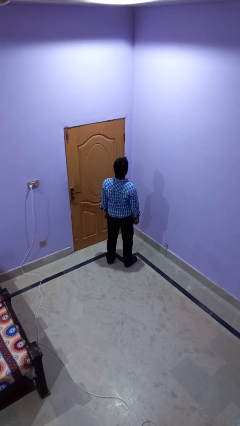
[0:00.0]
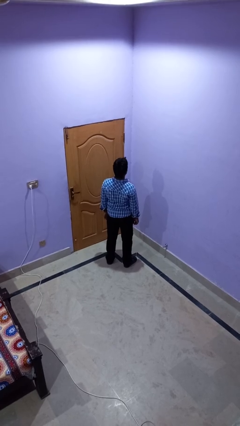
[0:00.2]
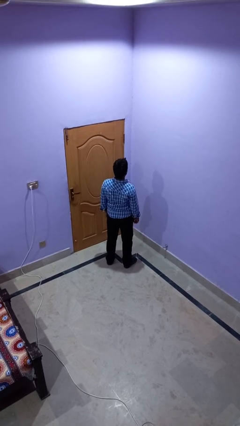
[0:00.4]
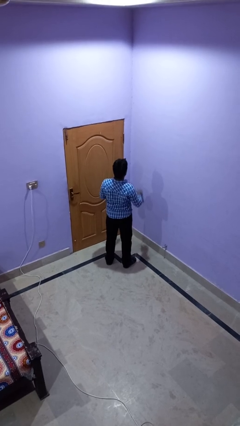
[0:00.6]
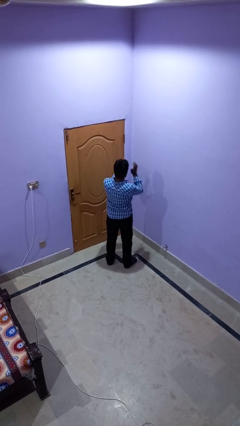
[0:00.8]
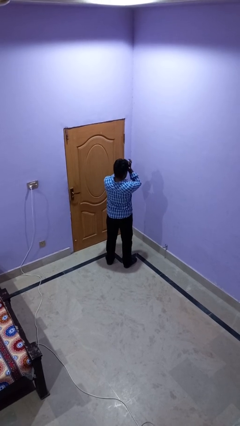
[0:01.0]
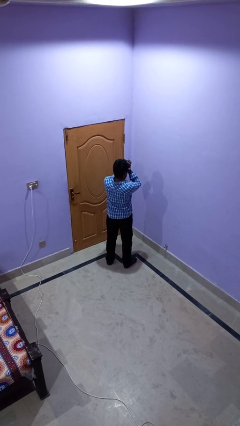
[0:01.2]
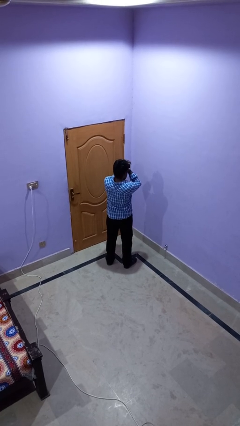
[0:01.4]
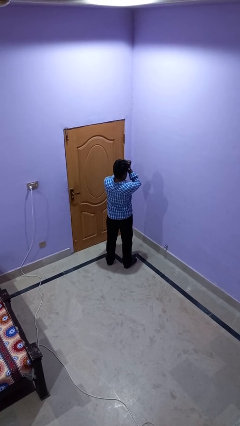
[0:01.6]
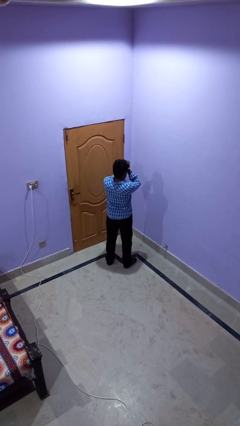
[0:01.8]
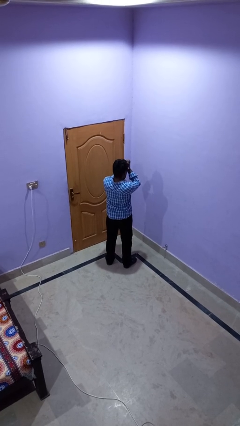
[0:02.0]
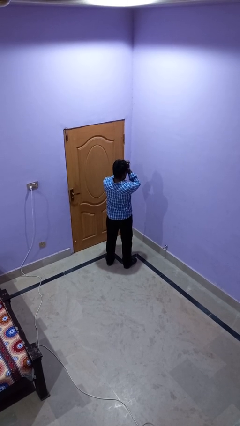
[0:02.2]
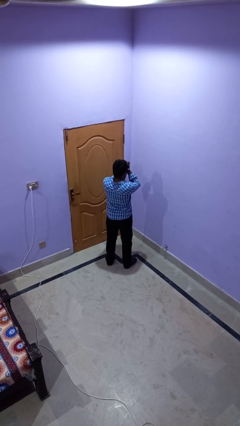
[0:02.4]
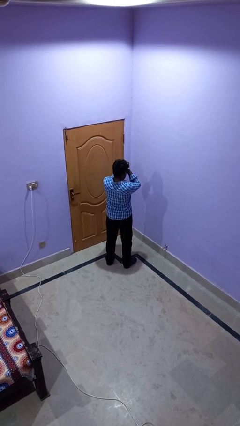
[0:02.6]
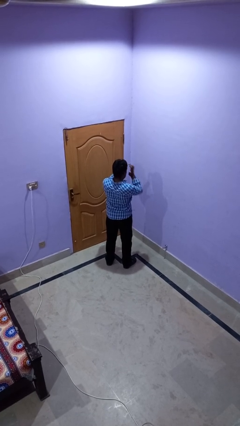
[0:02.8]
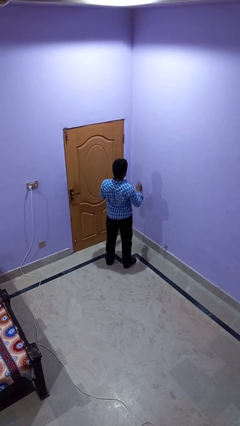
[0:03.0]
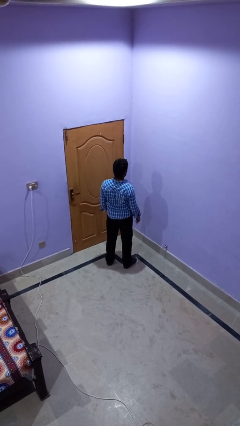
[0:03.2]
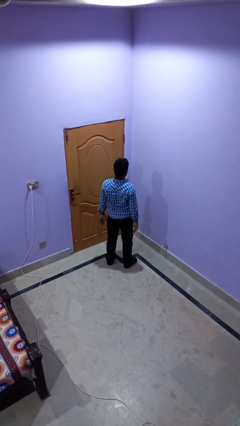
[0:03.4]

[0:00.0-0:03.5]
person rubs eyes

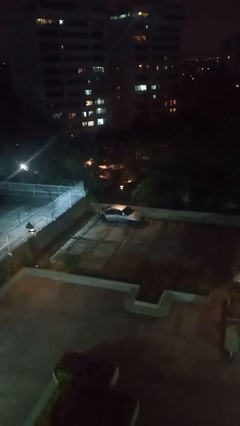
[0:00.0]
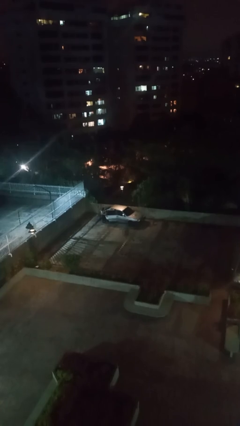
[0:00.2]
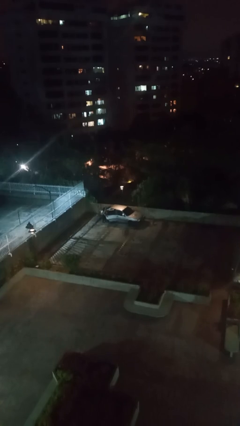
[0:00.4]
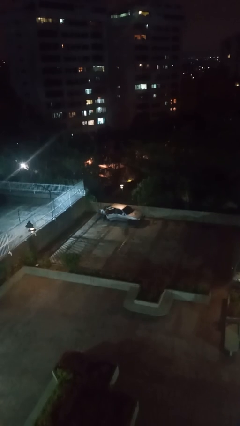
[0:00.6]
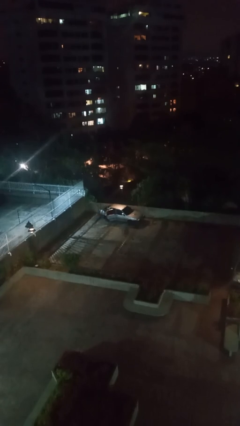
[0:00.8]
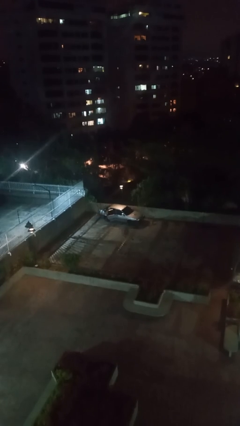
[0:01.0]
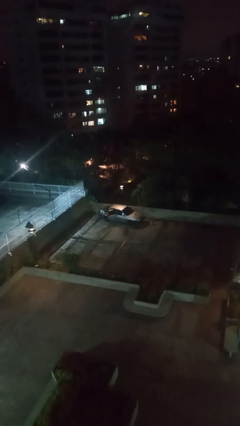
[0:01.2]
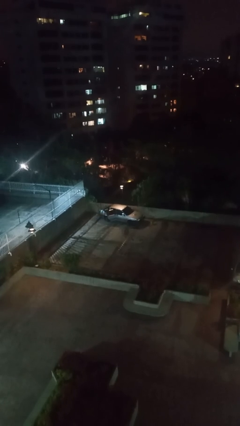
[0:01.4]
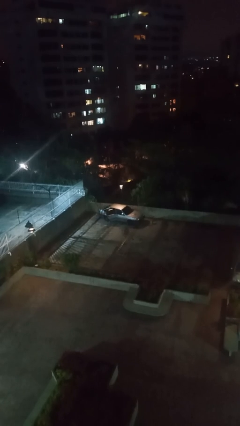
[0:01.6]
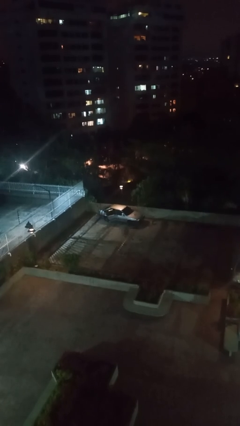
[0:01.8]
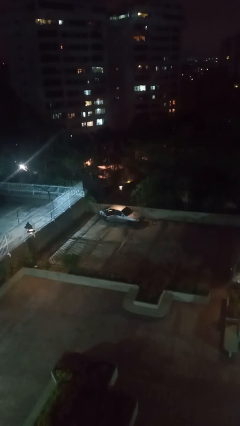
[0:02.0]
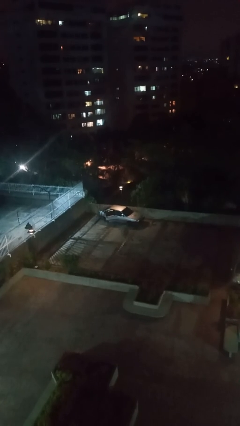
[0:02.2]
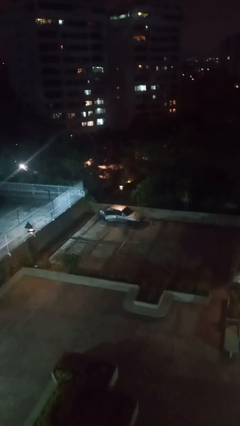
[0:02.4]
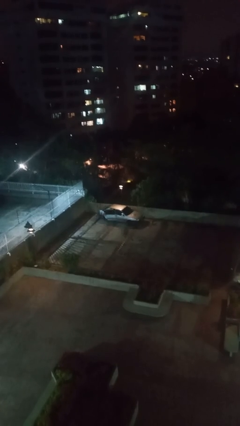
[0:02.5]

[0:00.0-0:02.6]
car picks up person

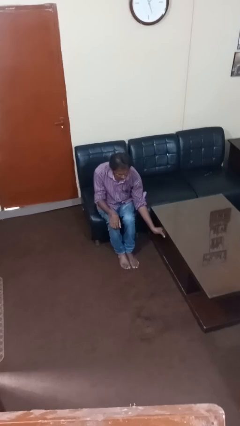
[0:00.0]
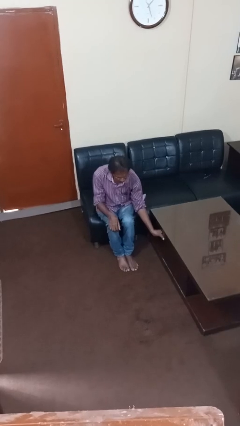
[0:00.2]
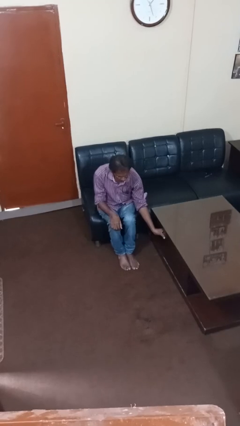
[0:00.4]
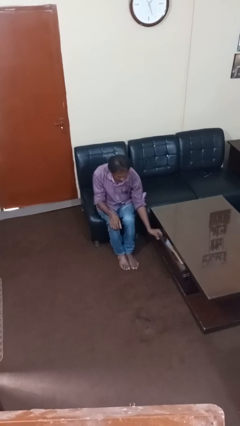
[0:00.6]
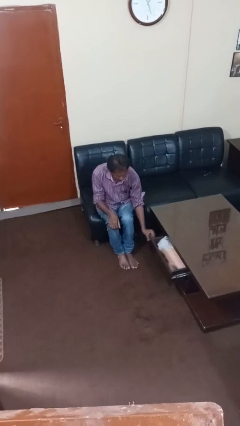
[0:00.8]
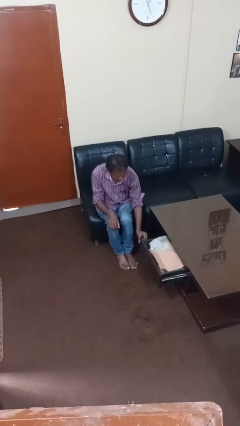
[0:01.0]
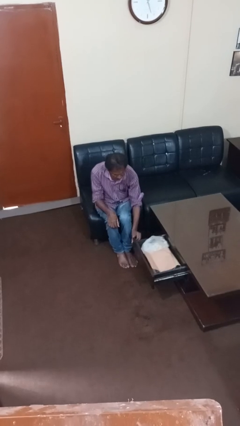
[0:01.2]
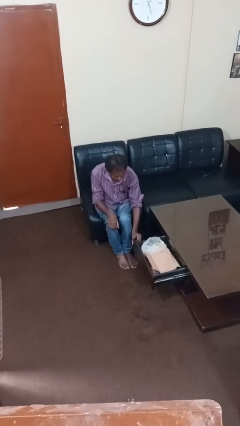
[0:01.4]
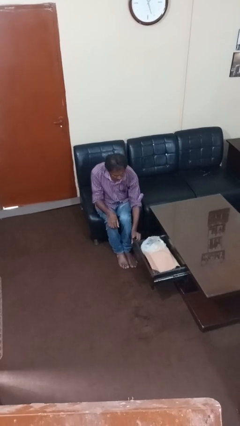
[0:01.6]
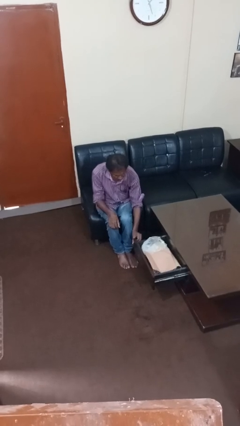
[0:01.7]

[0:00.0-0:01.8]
person opens dresser drawer

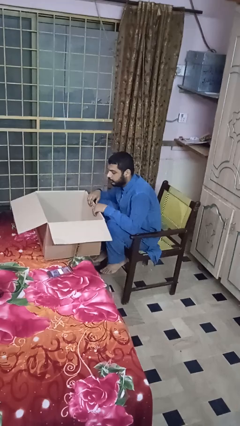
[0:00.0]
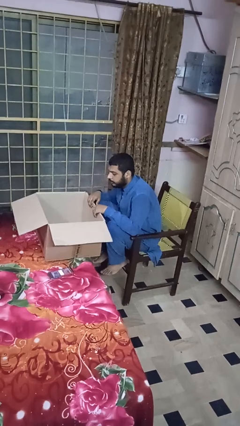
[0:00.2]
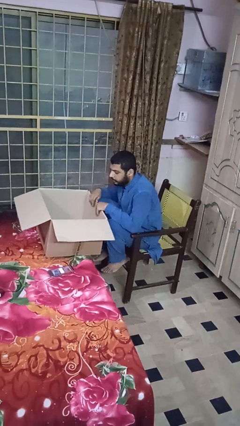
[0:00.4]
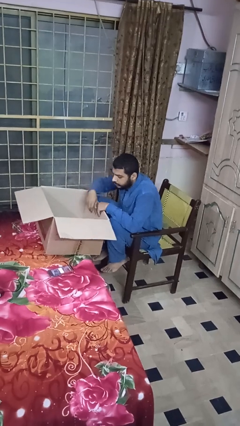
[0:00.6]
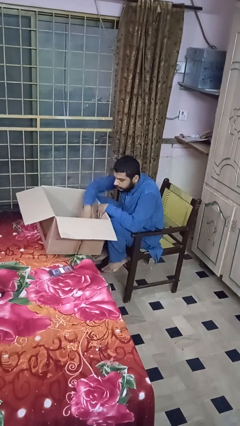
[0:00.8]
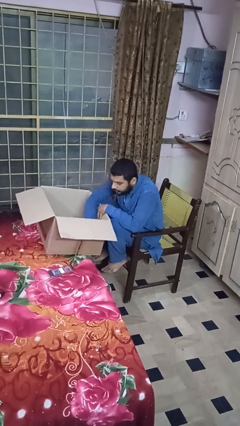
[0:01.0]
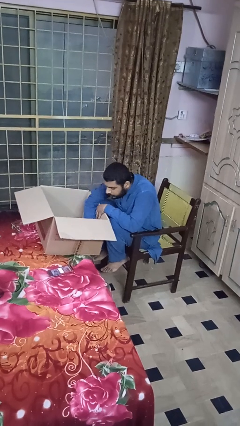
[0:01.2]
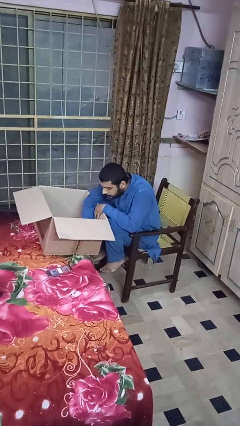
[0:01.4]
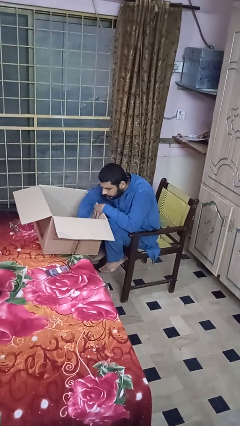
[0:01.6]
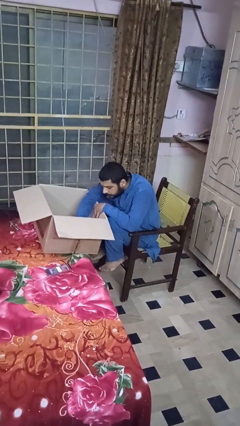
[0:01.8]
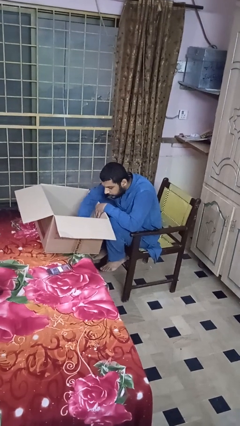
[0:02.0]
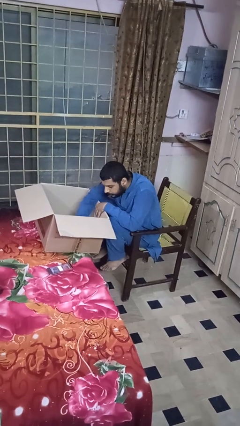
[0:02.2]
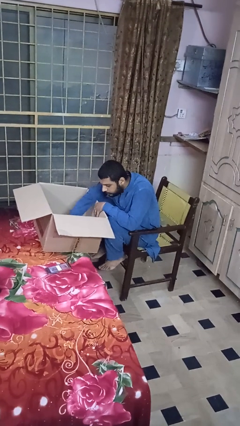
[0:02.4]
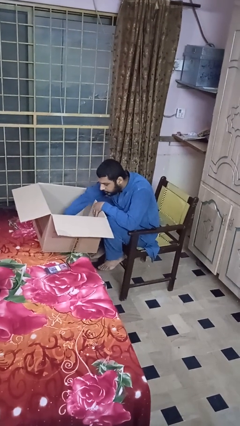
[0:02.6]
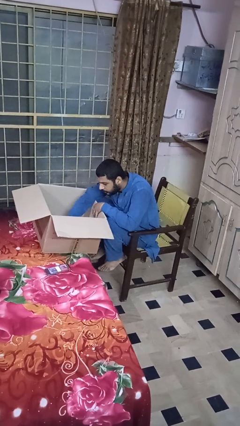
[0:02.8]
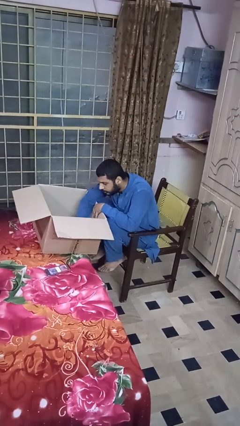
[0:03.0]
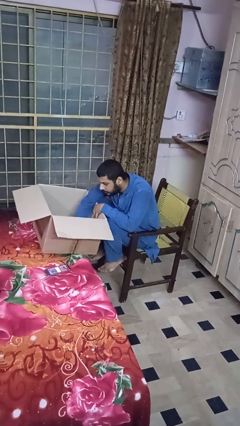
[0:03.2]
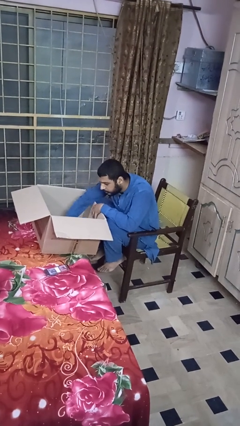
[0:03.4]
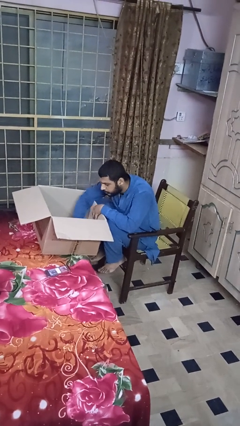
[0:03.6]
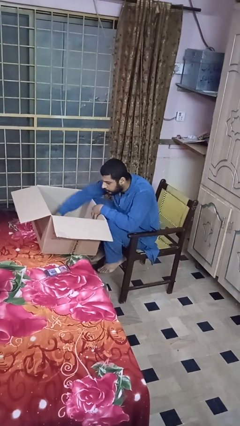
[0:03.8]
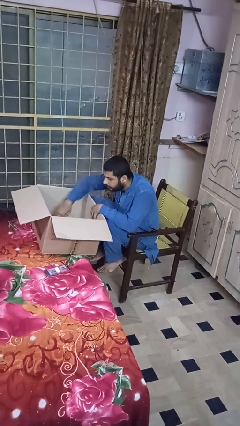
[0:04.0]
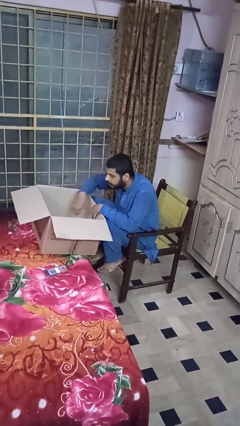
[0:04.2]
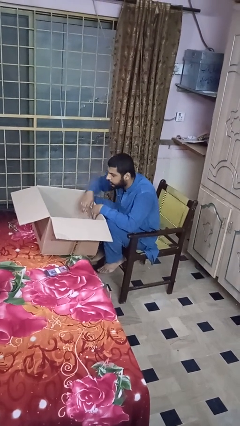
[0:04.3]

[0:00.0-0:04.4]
person searches in box

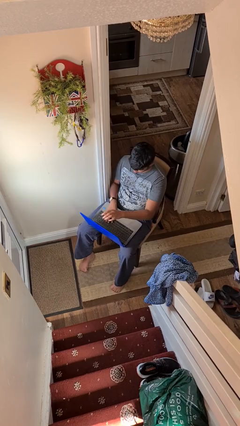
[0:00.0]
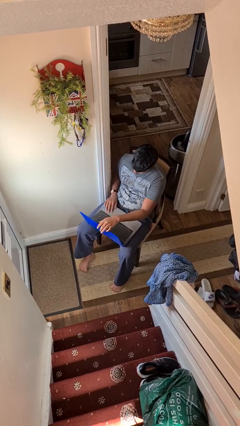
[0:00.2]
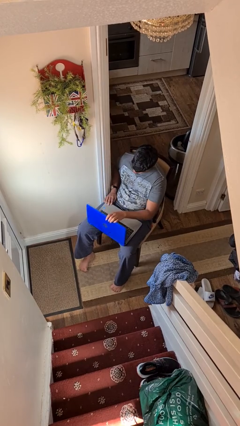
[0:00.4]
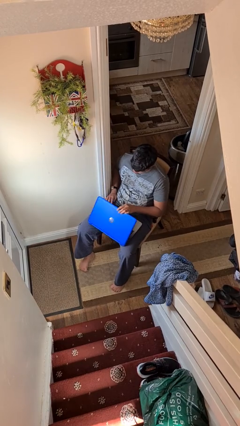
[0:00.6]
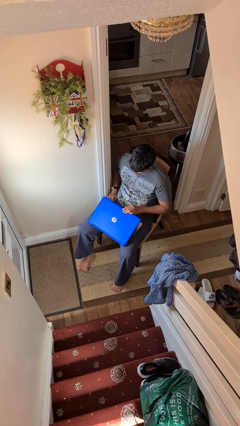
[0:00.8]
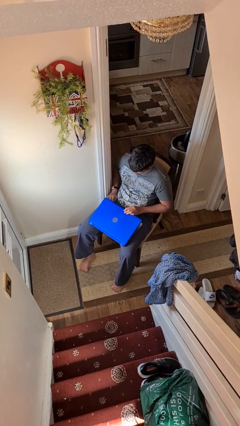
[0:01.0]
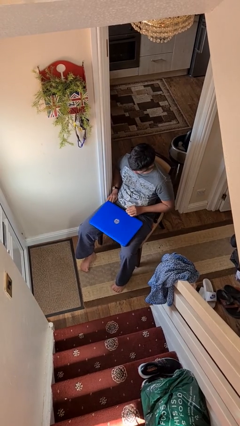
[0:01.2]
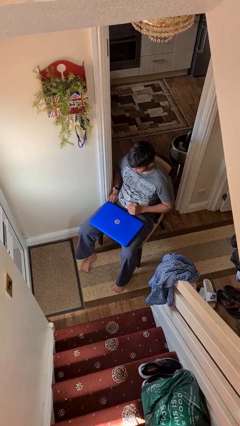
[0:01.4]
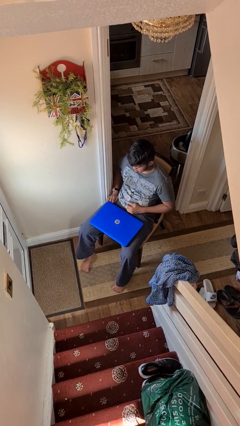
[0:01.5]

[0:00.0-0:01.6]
person closes laptop

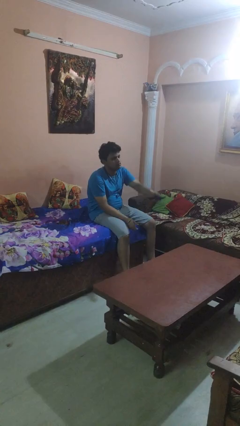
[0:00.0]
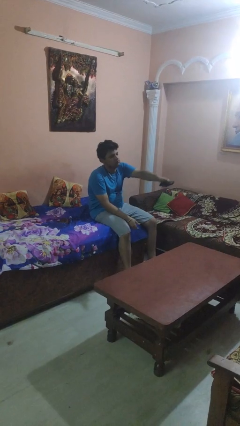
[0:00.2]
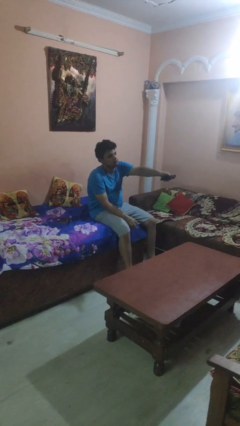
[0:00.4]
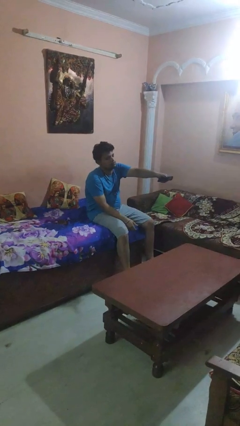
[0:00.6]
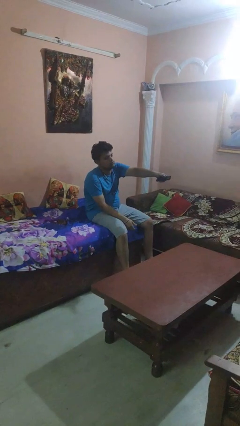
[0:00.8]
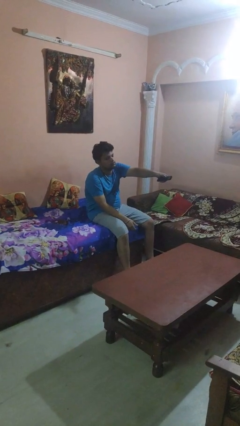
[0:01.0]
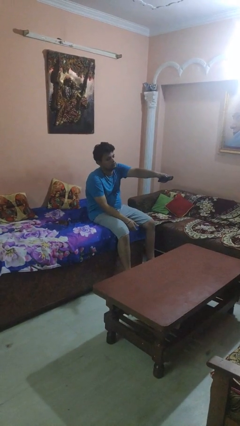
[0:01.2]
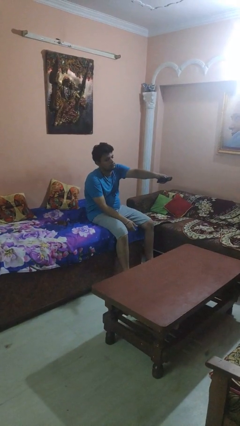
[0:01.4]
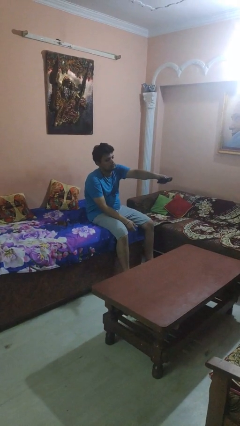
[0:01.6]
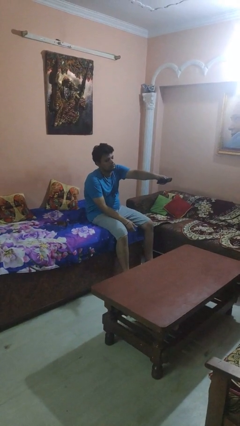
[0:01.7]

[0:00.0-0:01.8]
person uses television remote

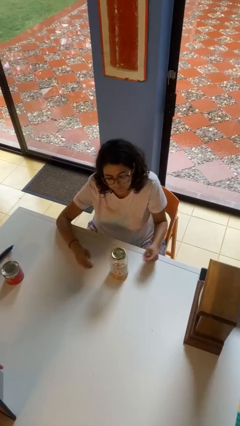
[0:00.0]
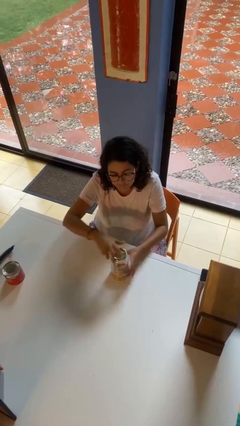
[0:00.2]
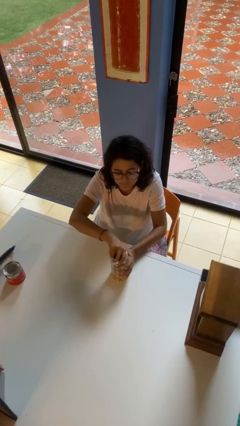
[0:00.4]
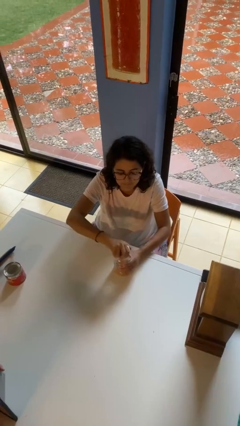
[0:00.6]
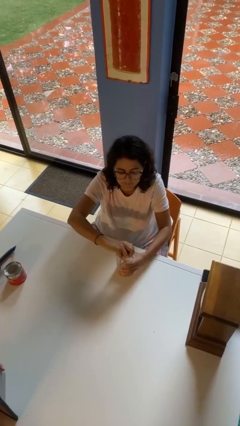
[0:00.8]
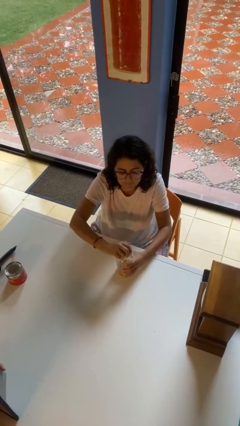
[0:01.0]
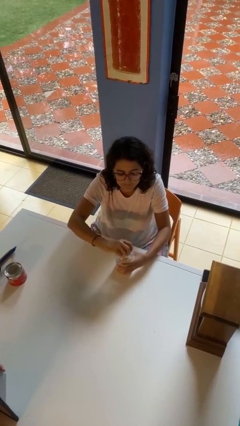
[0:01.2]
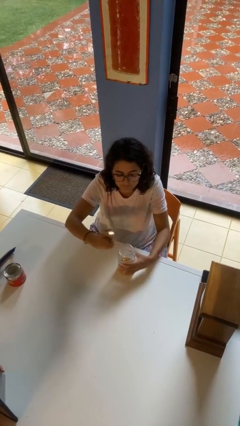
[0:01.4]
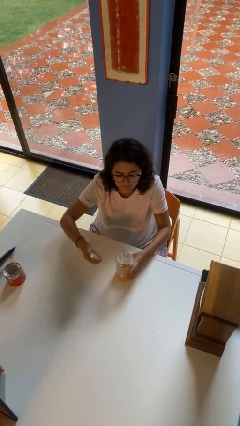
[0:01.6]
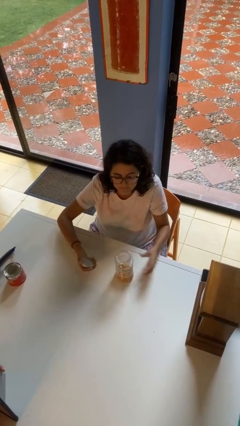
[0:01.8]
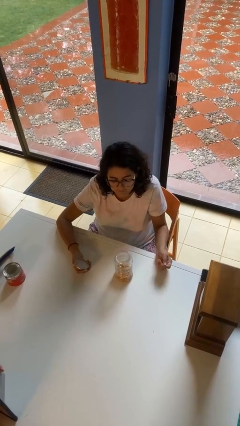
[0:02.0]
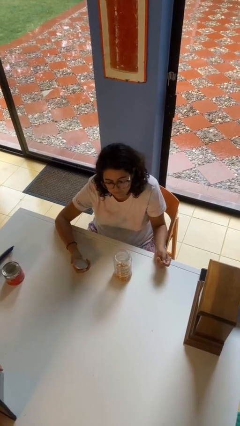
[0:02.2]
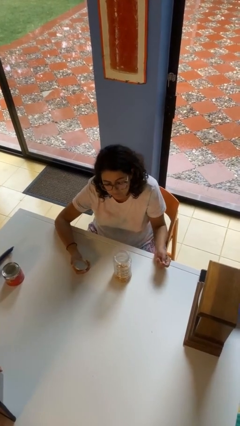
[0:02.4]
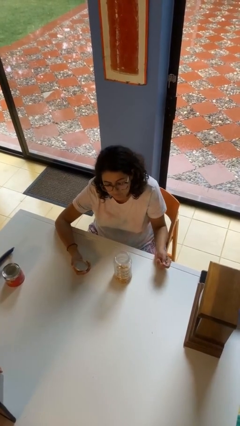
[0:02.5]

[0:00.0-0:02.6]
person opens jar
